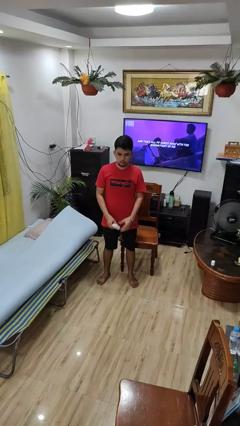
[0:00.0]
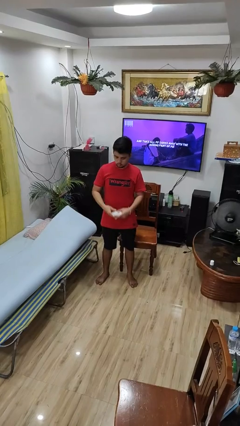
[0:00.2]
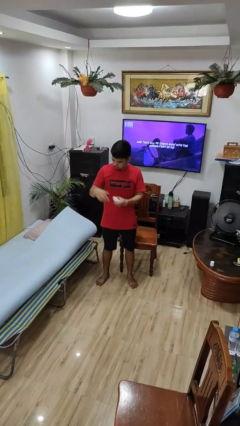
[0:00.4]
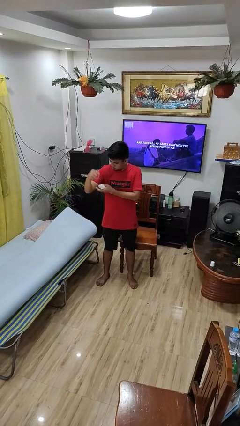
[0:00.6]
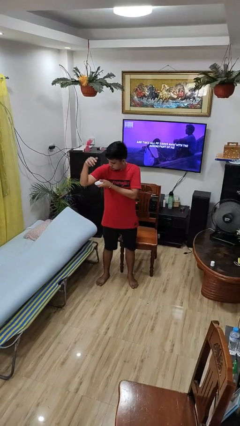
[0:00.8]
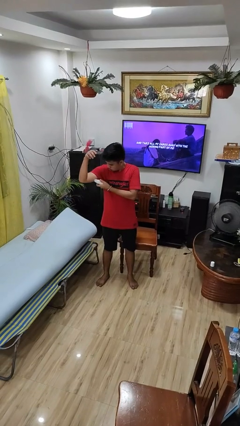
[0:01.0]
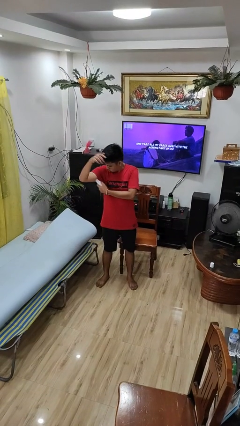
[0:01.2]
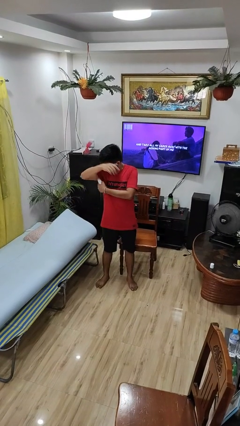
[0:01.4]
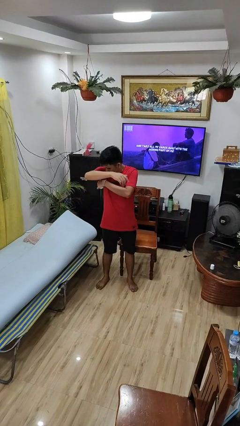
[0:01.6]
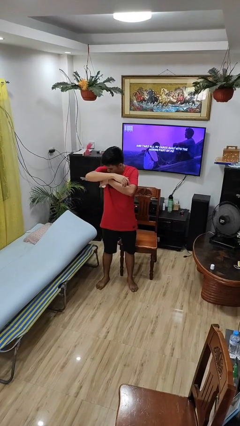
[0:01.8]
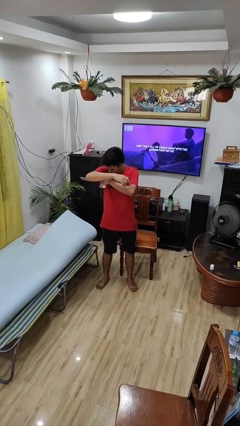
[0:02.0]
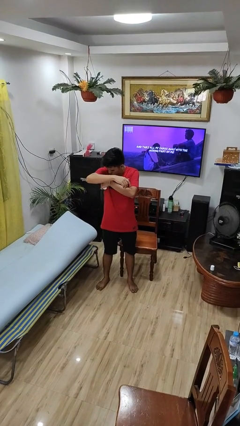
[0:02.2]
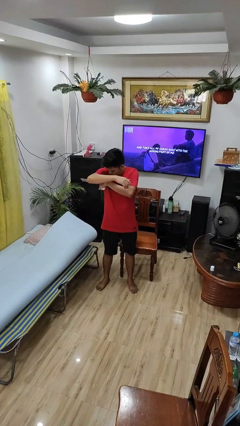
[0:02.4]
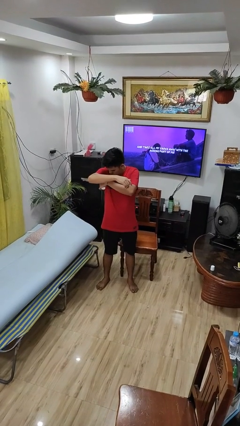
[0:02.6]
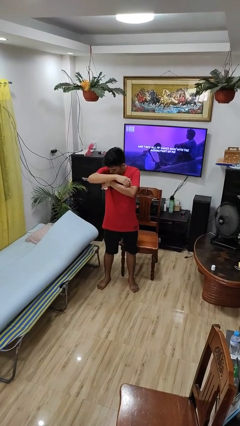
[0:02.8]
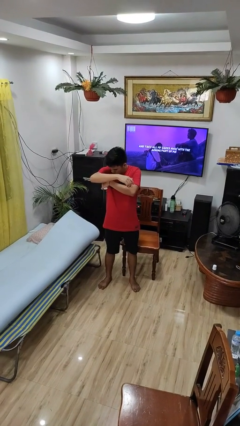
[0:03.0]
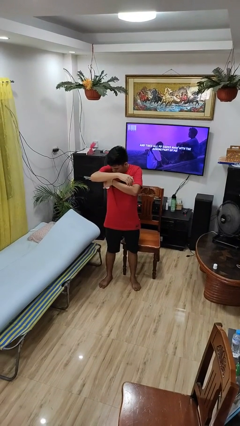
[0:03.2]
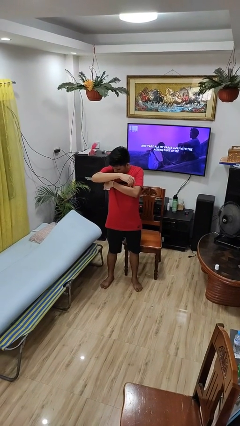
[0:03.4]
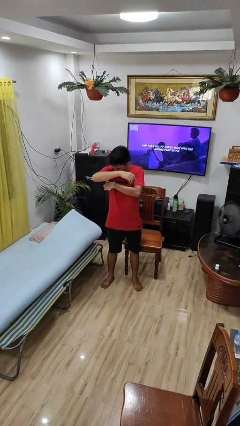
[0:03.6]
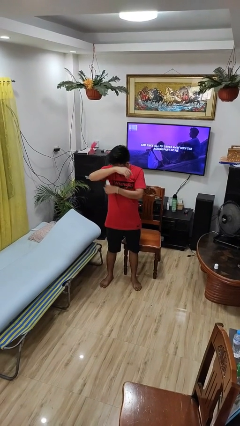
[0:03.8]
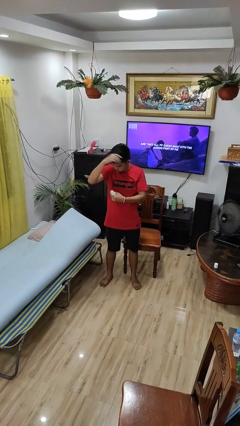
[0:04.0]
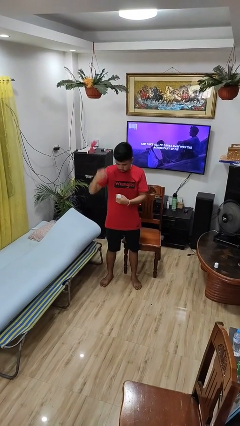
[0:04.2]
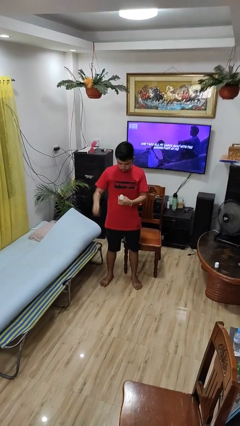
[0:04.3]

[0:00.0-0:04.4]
person applies deodorant

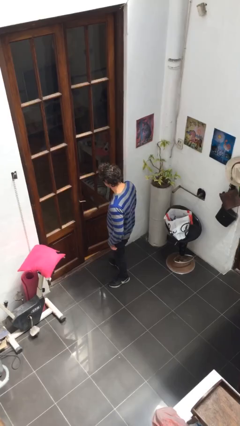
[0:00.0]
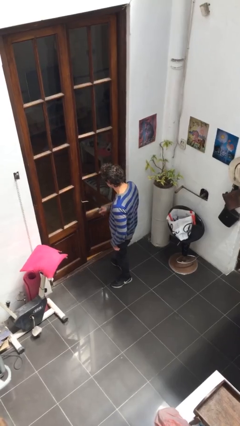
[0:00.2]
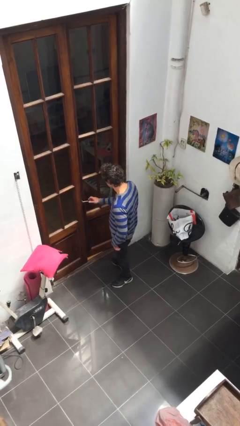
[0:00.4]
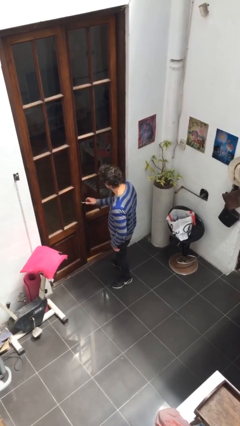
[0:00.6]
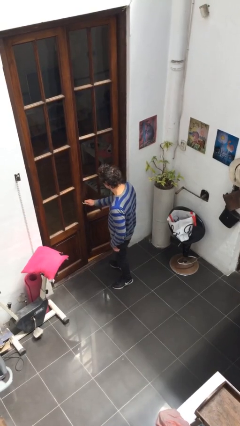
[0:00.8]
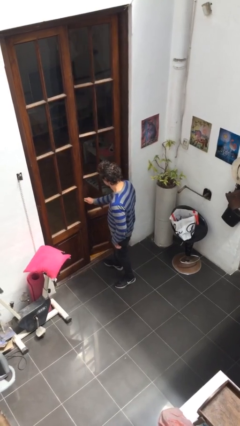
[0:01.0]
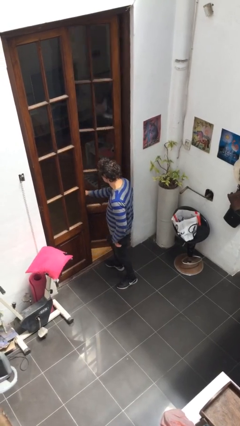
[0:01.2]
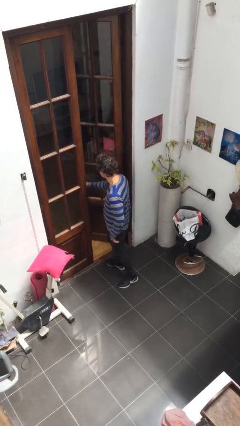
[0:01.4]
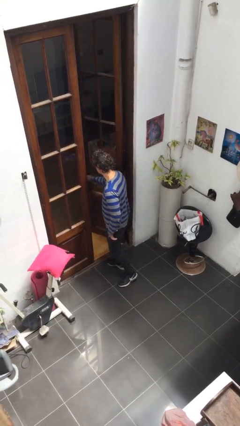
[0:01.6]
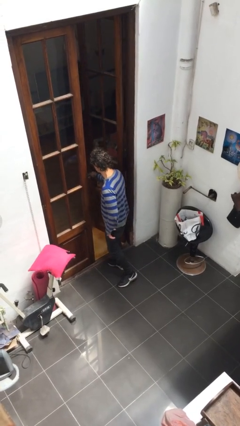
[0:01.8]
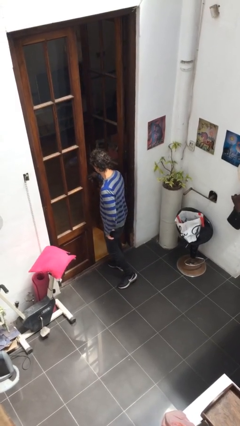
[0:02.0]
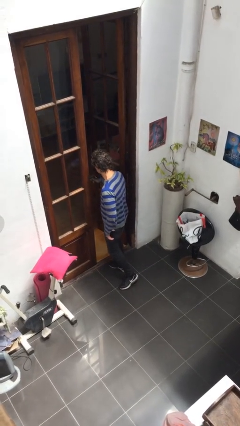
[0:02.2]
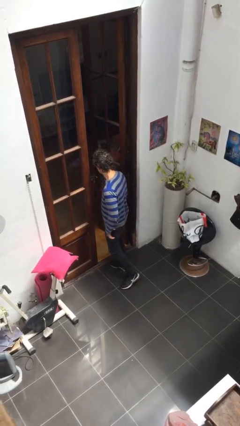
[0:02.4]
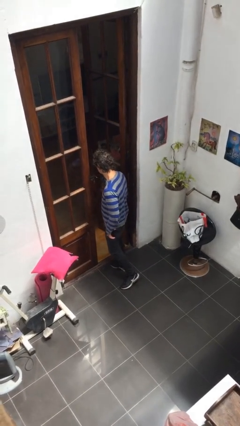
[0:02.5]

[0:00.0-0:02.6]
person opens facility door

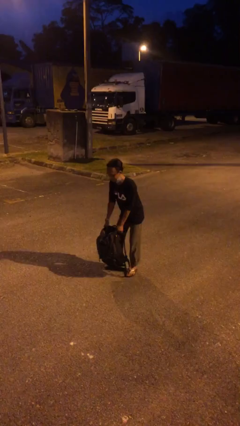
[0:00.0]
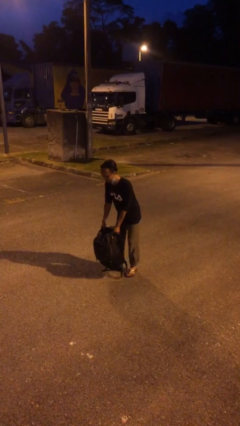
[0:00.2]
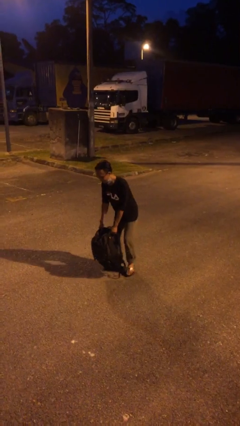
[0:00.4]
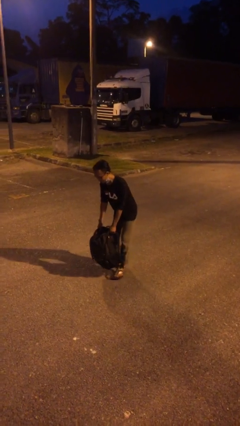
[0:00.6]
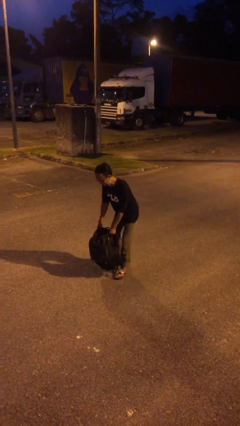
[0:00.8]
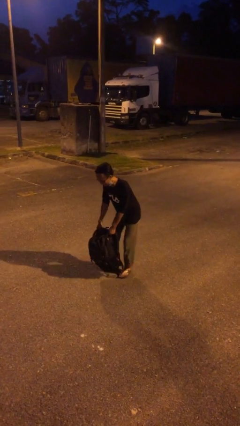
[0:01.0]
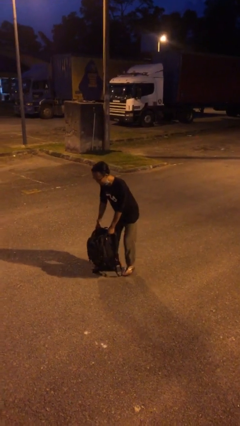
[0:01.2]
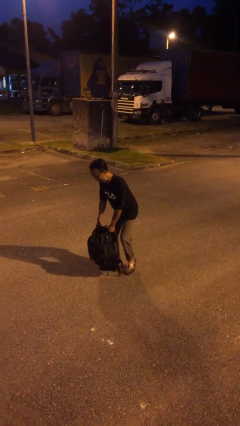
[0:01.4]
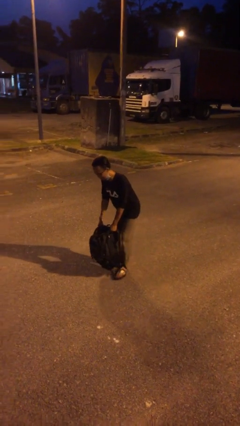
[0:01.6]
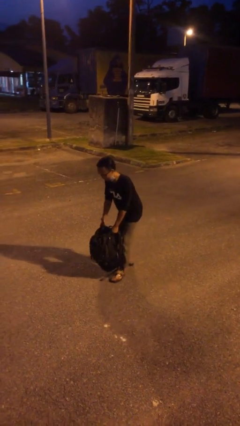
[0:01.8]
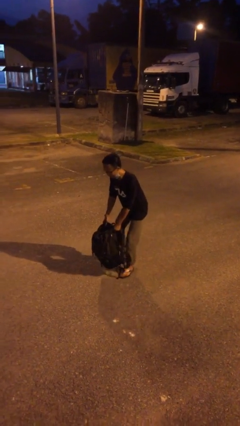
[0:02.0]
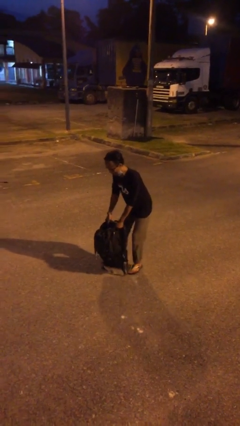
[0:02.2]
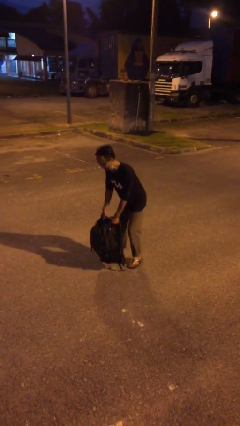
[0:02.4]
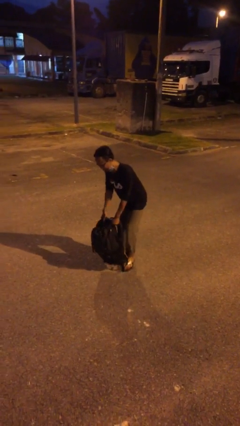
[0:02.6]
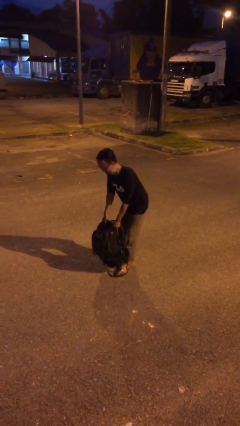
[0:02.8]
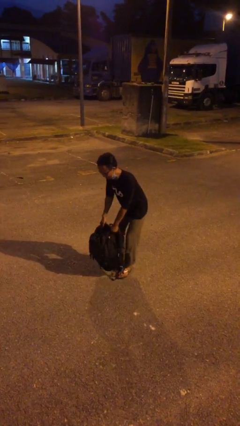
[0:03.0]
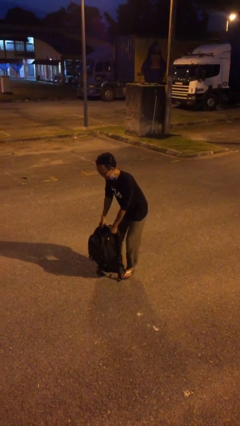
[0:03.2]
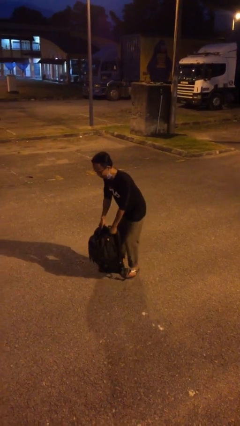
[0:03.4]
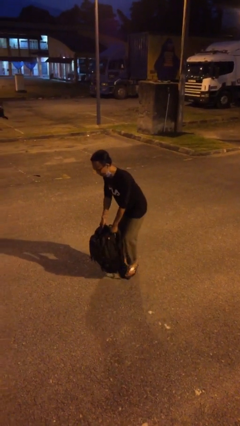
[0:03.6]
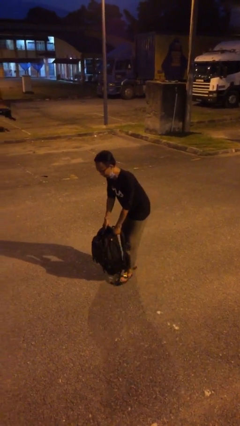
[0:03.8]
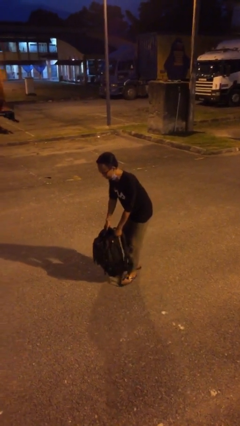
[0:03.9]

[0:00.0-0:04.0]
person carries heavy object

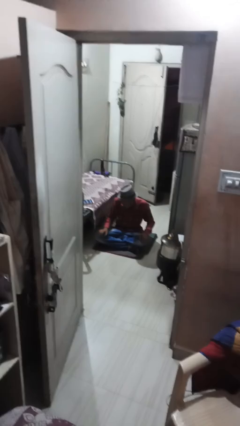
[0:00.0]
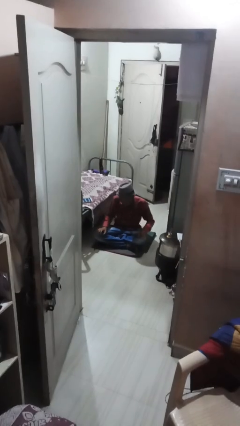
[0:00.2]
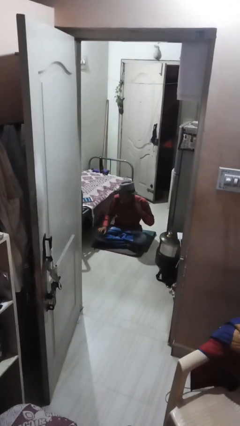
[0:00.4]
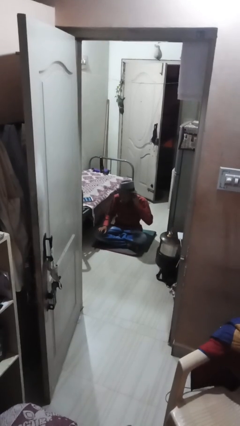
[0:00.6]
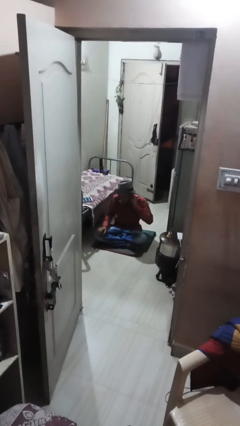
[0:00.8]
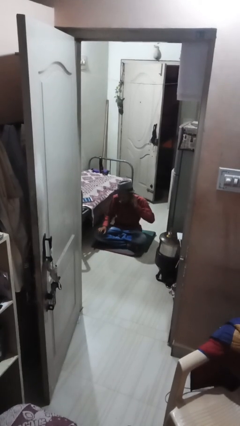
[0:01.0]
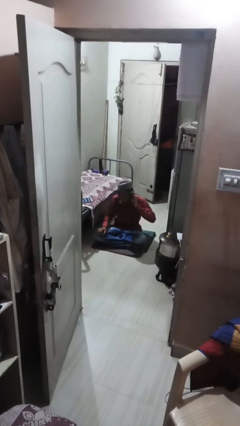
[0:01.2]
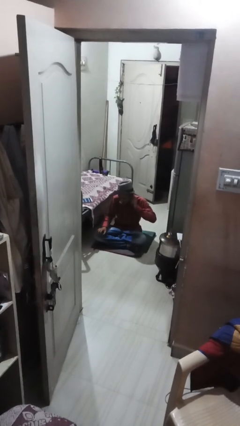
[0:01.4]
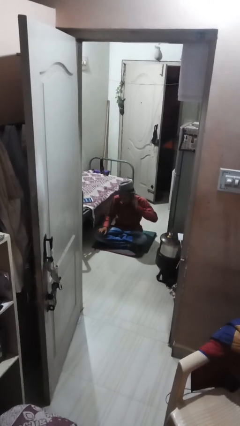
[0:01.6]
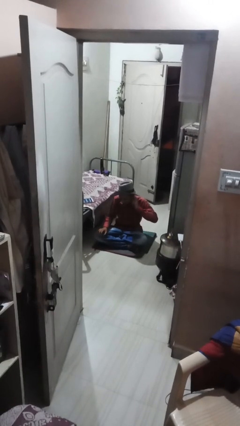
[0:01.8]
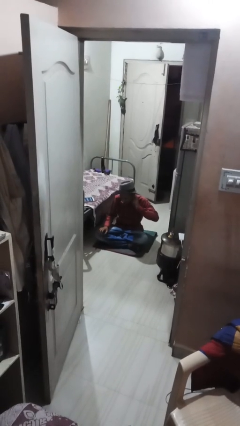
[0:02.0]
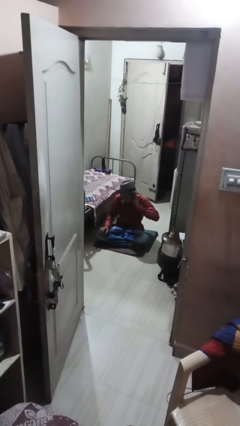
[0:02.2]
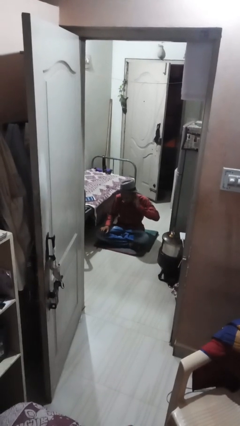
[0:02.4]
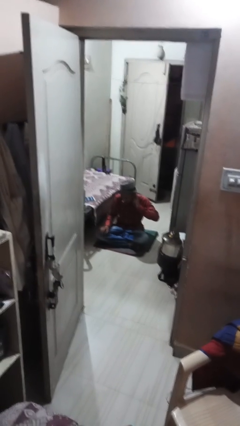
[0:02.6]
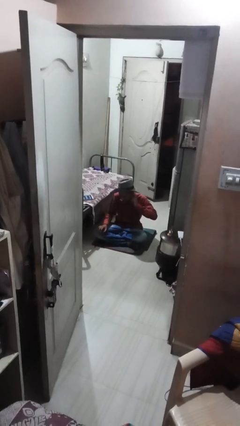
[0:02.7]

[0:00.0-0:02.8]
person touches earlobe

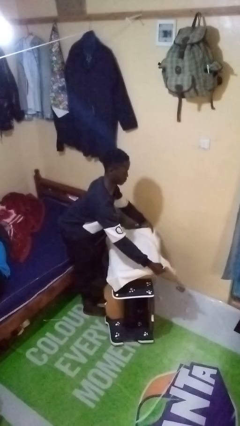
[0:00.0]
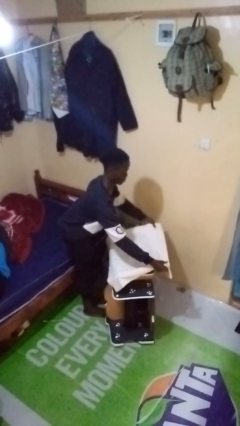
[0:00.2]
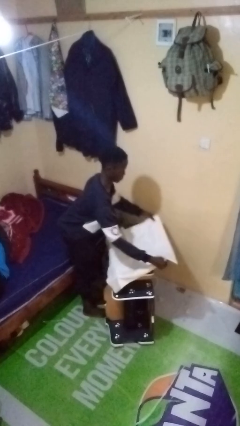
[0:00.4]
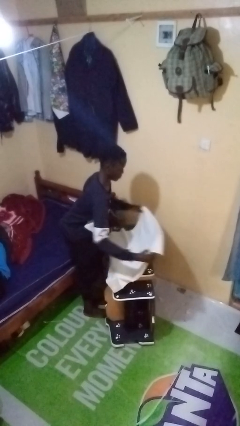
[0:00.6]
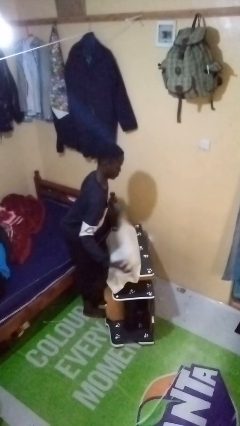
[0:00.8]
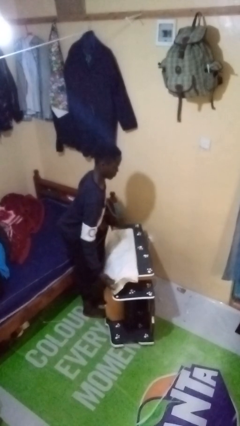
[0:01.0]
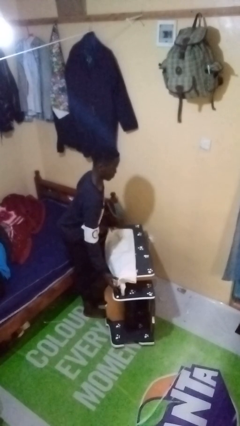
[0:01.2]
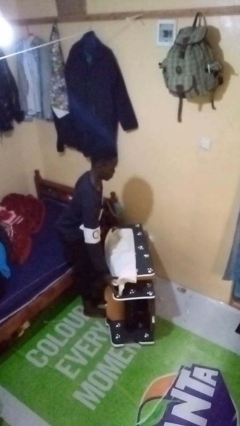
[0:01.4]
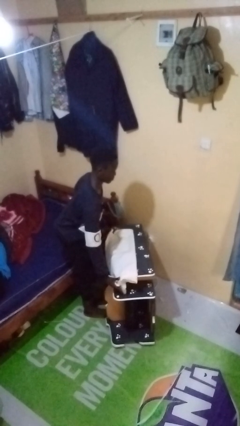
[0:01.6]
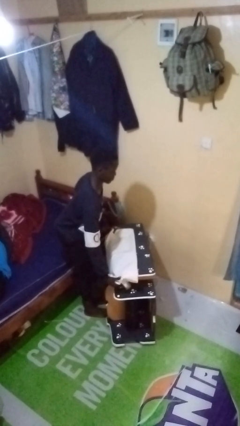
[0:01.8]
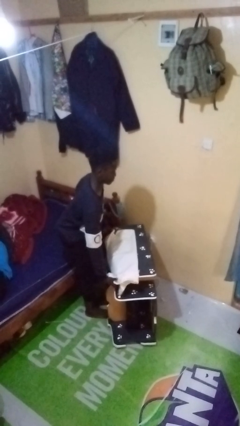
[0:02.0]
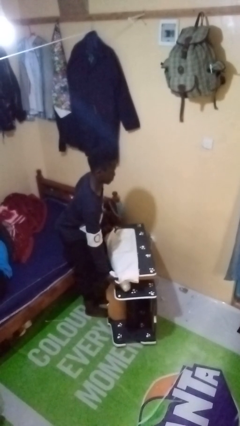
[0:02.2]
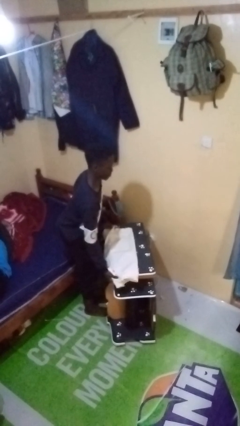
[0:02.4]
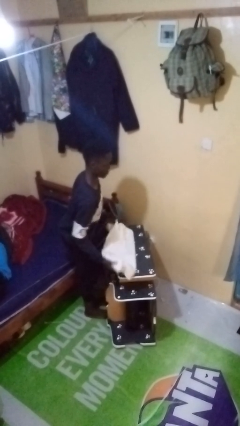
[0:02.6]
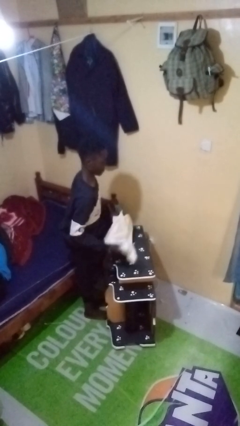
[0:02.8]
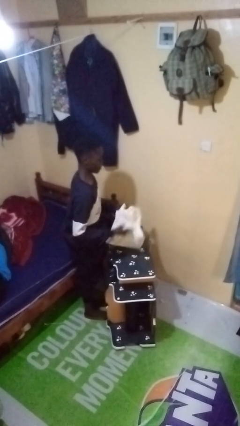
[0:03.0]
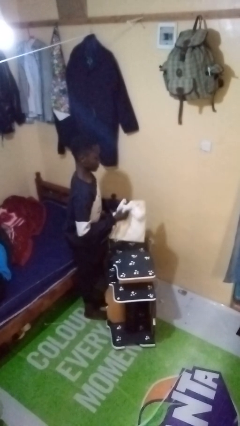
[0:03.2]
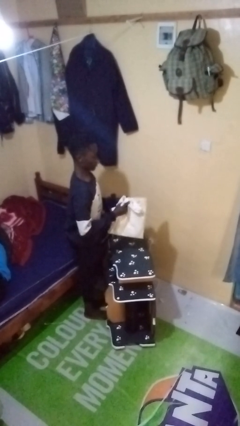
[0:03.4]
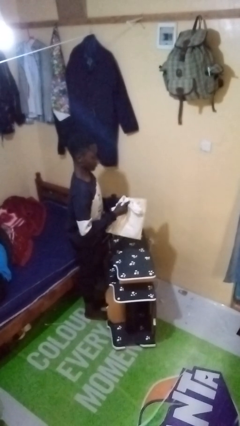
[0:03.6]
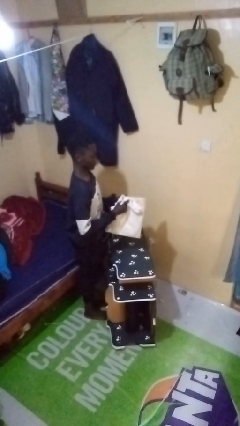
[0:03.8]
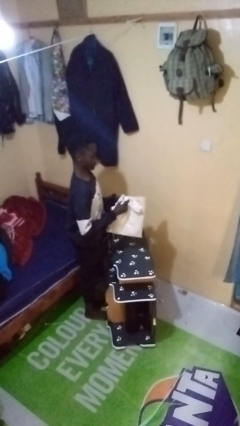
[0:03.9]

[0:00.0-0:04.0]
person folds tablecloth
